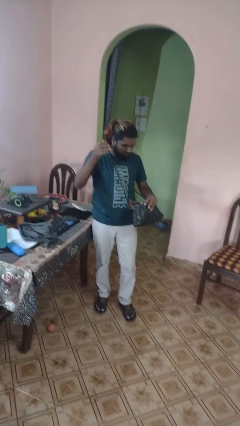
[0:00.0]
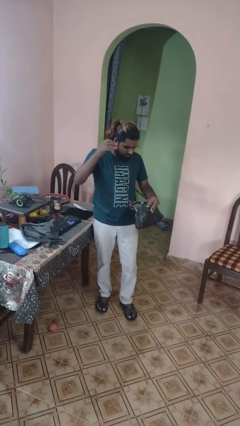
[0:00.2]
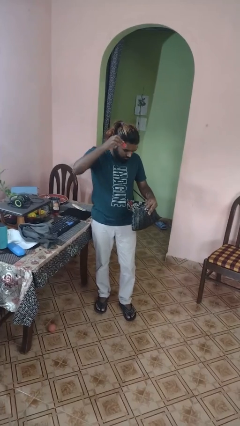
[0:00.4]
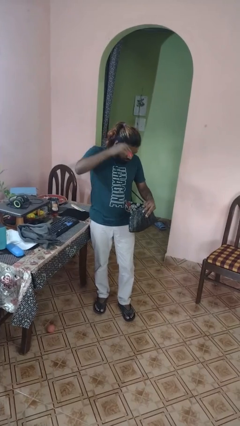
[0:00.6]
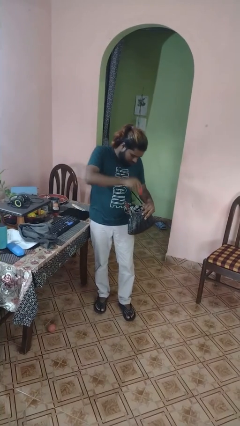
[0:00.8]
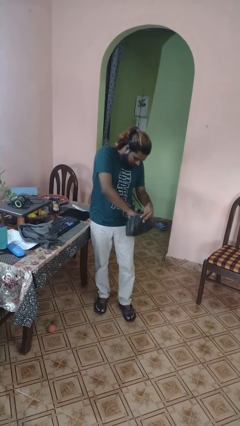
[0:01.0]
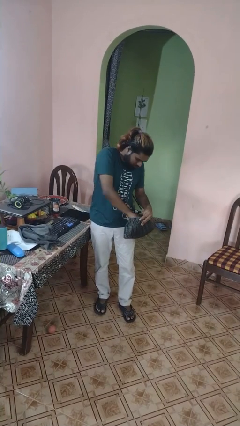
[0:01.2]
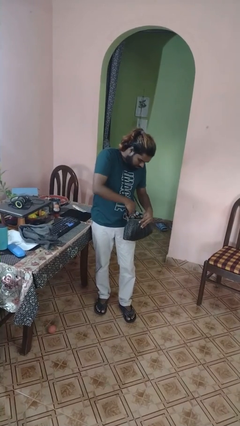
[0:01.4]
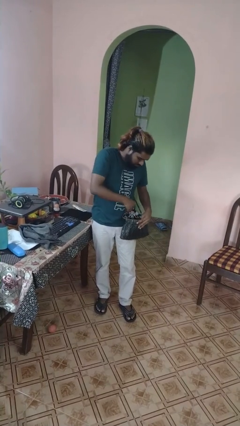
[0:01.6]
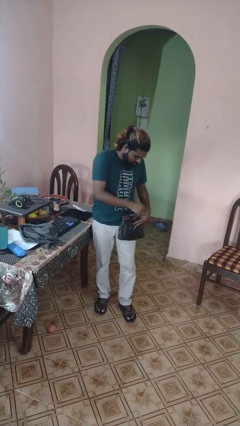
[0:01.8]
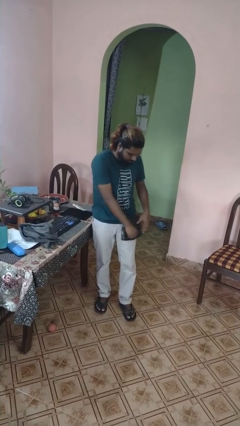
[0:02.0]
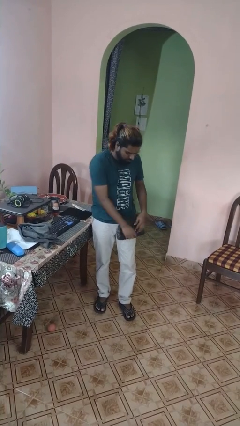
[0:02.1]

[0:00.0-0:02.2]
person puts object into purse

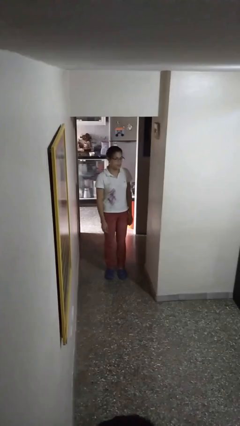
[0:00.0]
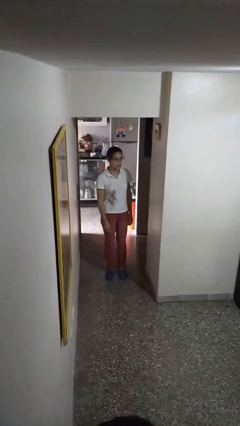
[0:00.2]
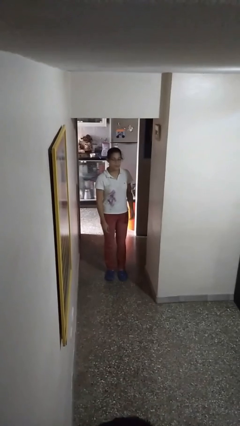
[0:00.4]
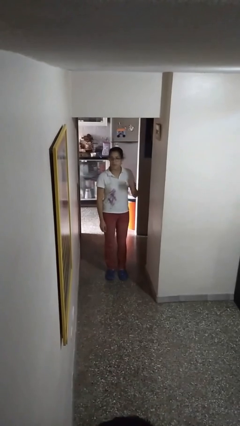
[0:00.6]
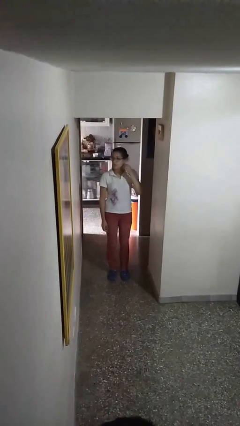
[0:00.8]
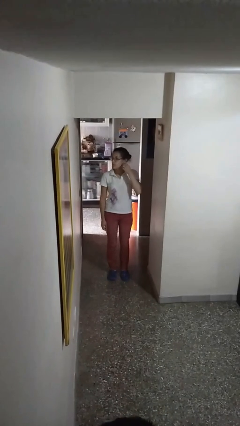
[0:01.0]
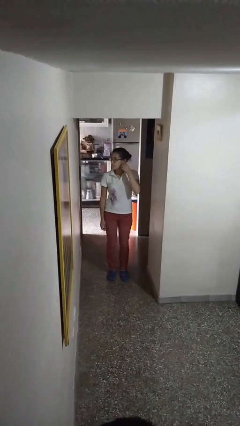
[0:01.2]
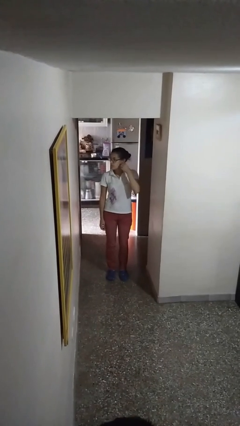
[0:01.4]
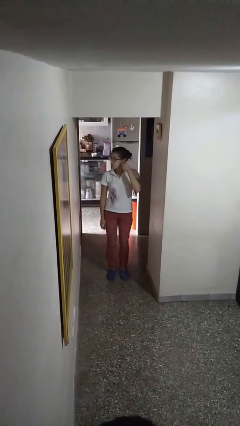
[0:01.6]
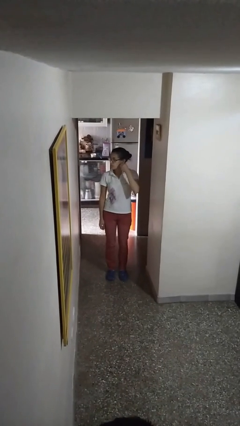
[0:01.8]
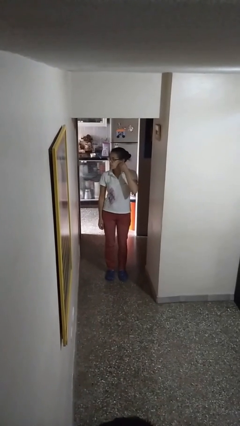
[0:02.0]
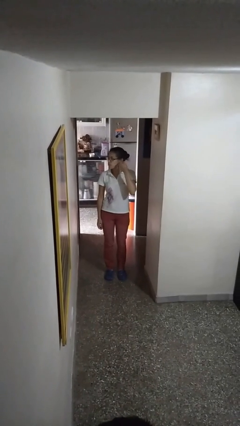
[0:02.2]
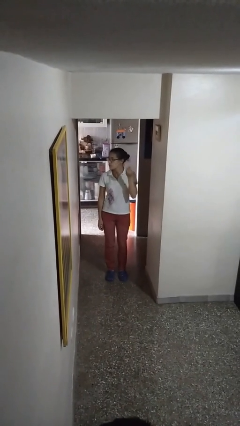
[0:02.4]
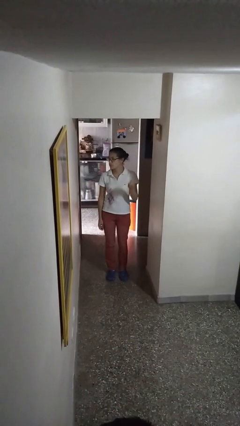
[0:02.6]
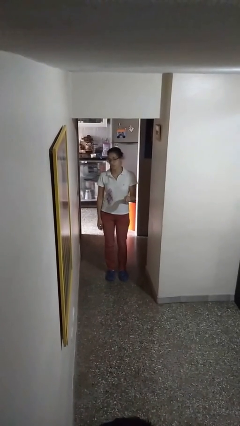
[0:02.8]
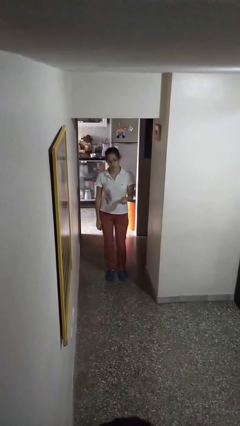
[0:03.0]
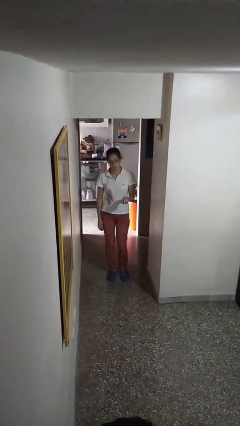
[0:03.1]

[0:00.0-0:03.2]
person takes off earrings

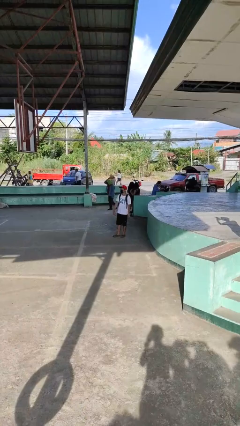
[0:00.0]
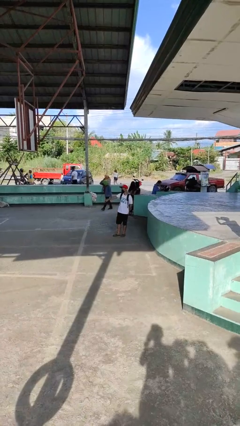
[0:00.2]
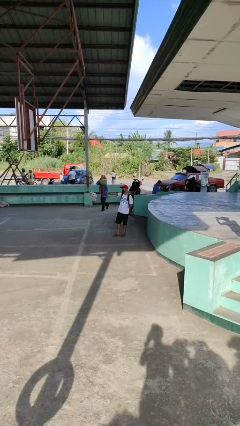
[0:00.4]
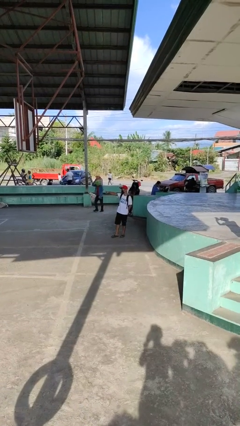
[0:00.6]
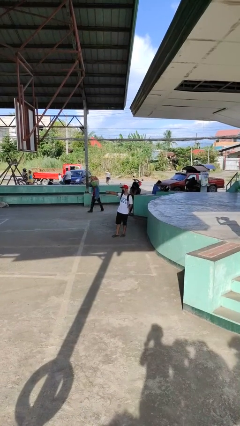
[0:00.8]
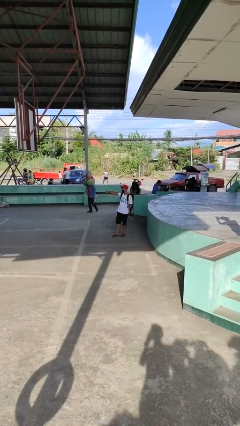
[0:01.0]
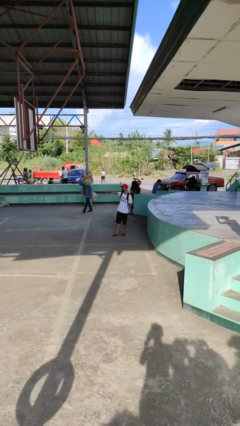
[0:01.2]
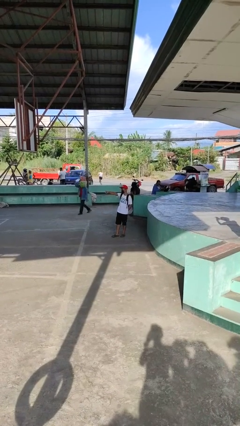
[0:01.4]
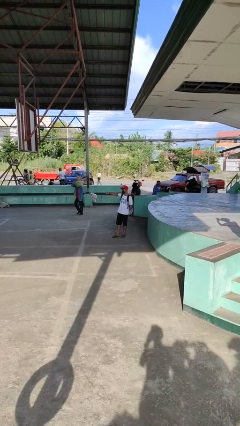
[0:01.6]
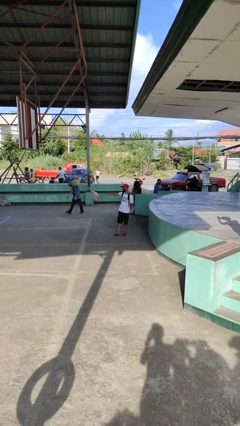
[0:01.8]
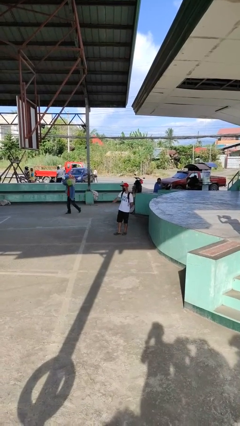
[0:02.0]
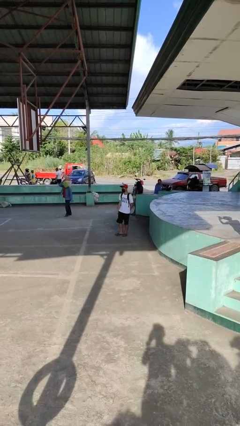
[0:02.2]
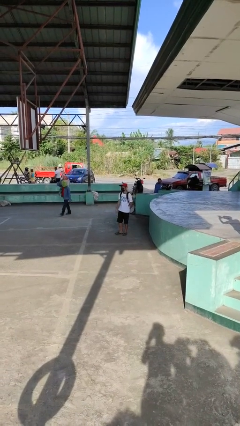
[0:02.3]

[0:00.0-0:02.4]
person points at person

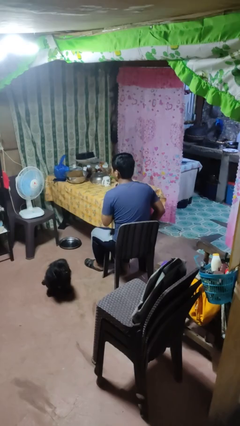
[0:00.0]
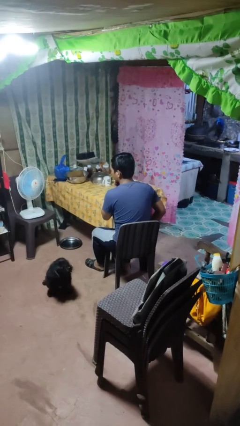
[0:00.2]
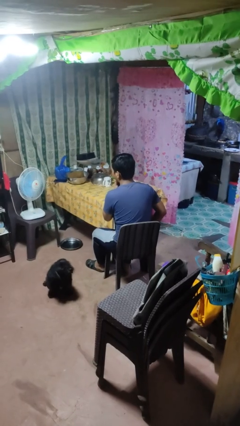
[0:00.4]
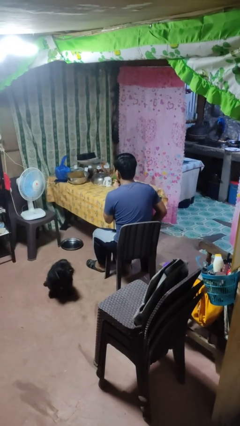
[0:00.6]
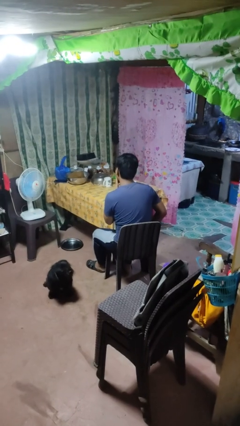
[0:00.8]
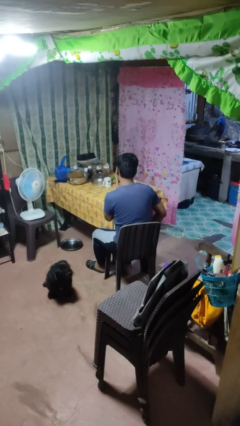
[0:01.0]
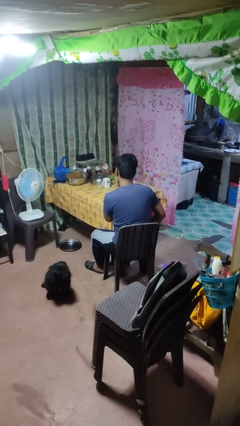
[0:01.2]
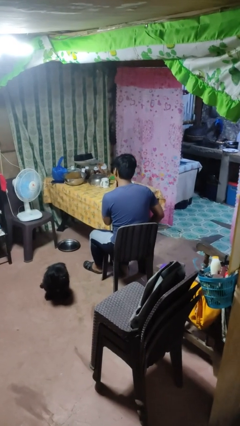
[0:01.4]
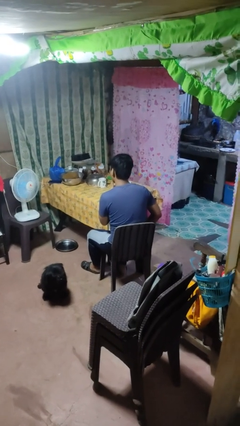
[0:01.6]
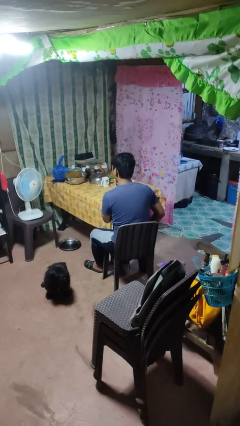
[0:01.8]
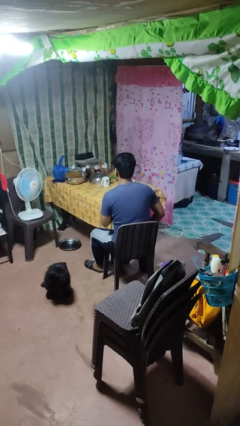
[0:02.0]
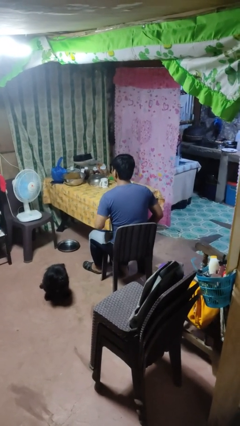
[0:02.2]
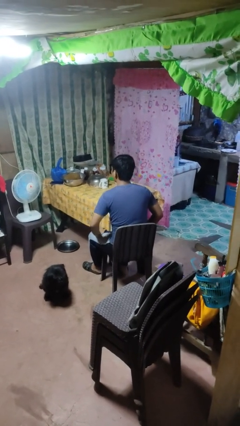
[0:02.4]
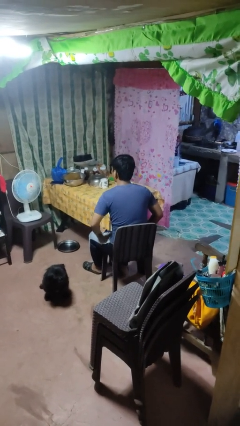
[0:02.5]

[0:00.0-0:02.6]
person strokes chin

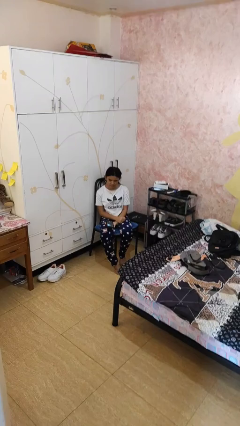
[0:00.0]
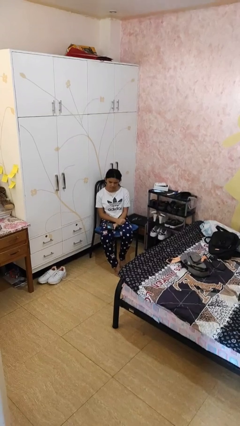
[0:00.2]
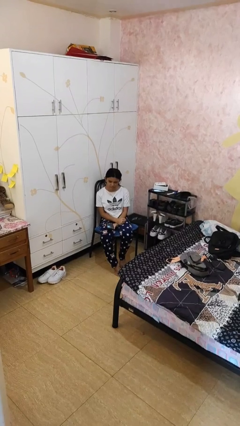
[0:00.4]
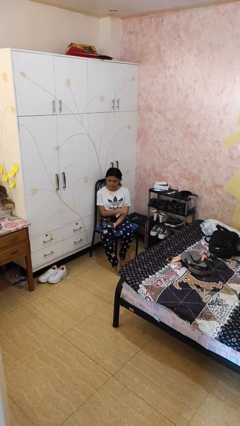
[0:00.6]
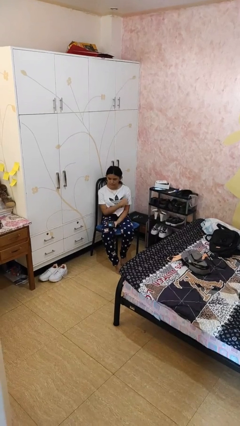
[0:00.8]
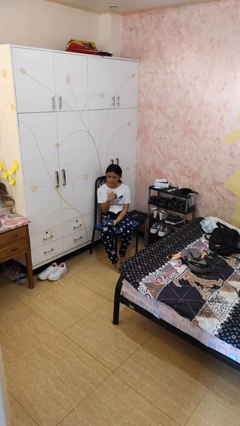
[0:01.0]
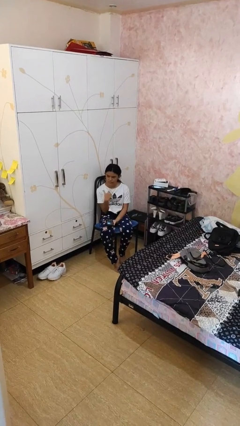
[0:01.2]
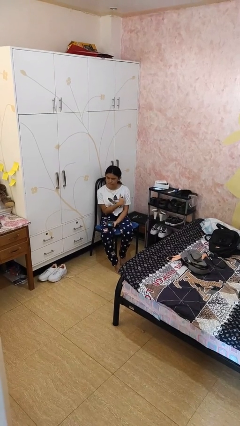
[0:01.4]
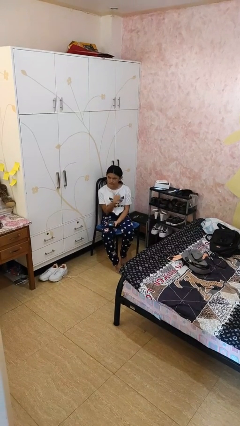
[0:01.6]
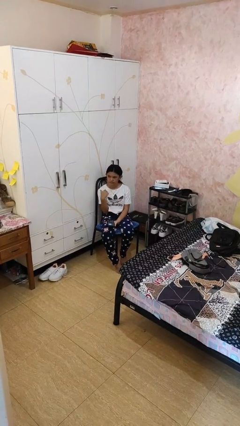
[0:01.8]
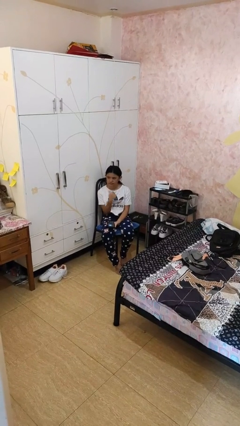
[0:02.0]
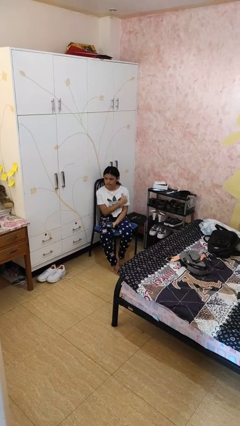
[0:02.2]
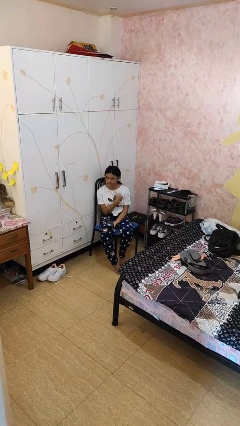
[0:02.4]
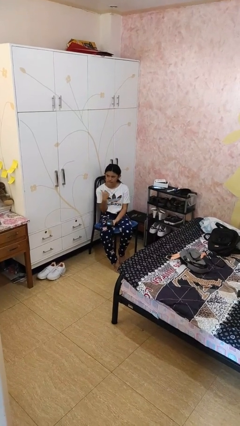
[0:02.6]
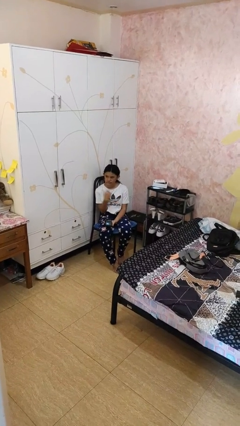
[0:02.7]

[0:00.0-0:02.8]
person gestures cut

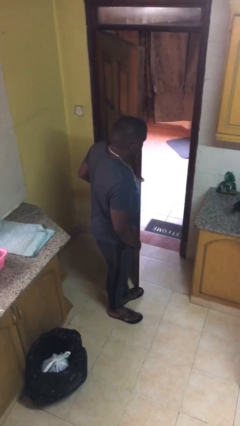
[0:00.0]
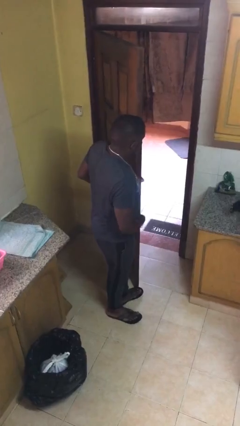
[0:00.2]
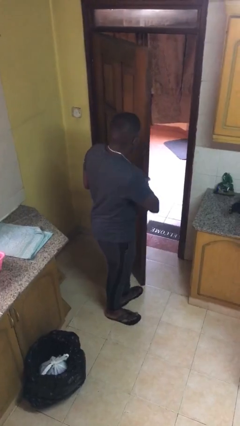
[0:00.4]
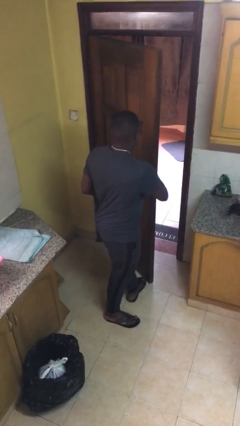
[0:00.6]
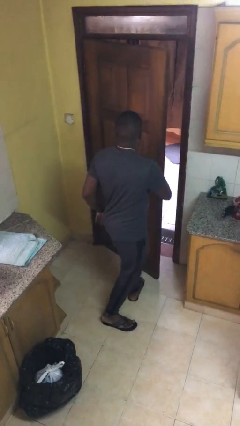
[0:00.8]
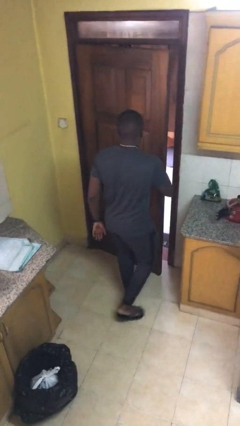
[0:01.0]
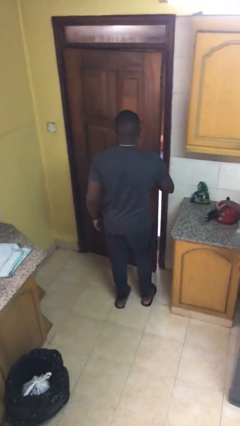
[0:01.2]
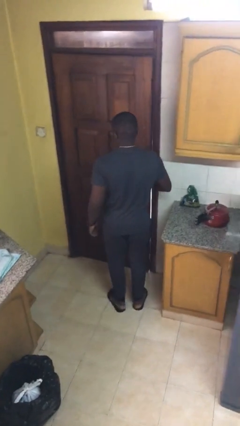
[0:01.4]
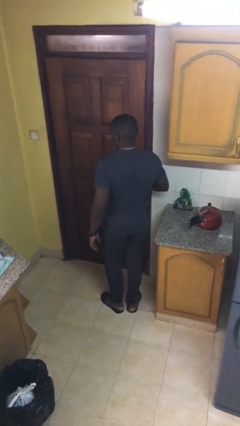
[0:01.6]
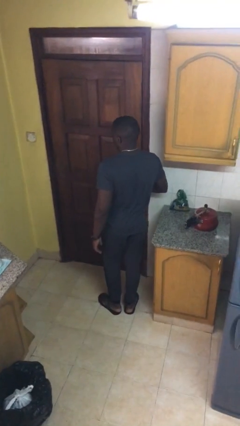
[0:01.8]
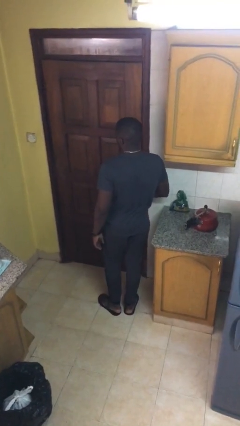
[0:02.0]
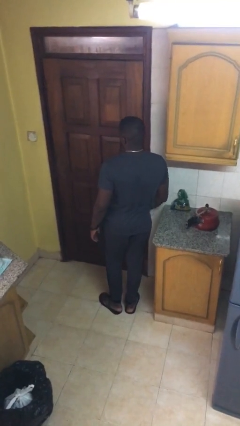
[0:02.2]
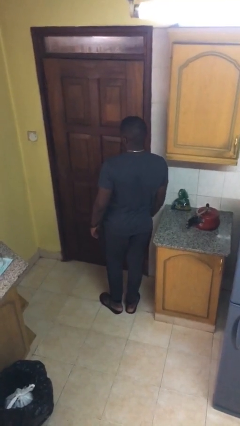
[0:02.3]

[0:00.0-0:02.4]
person closes facility door

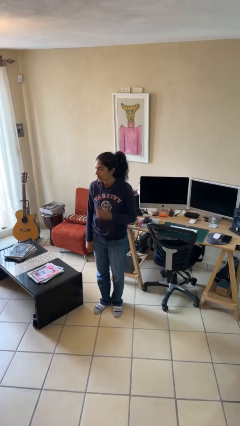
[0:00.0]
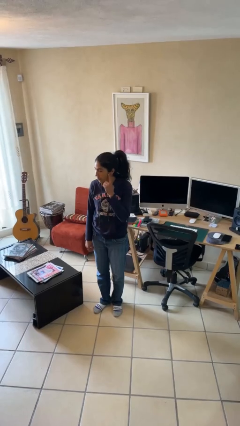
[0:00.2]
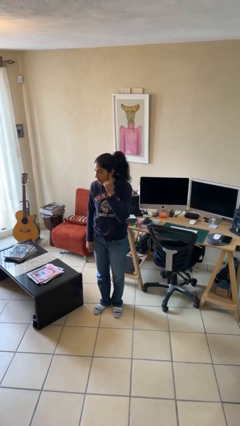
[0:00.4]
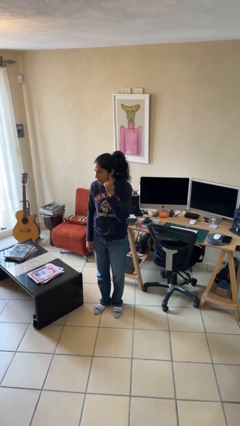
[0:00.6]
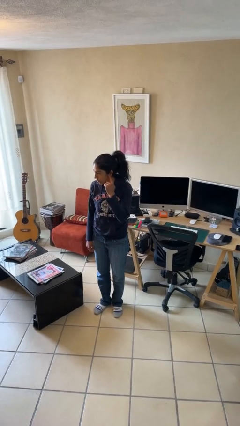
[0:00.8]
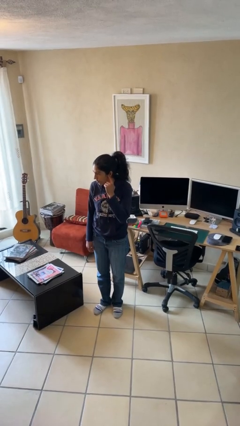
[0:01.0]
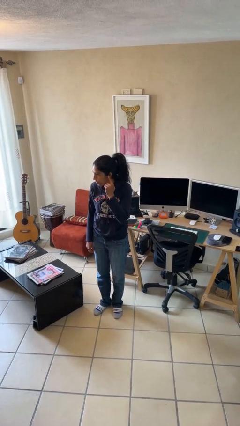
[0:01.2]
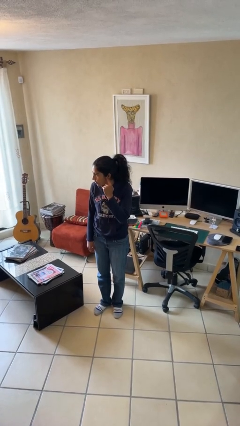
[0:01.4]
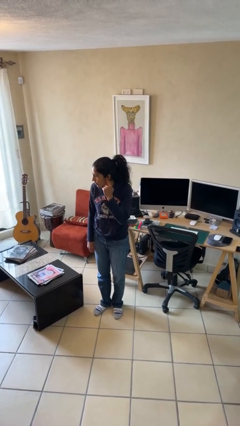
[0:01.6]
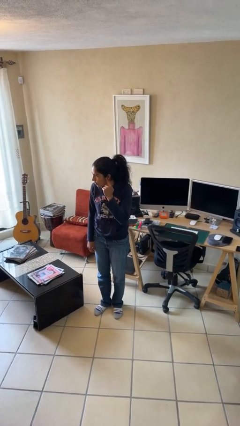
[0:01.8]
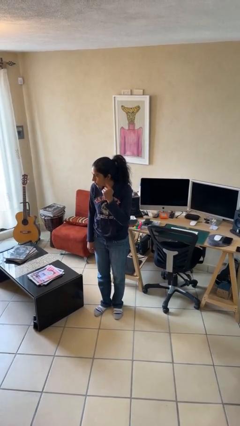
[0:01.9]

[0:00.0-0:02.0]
person gestures listen closely
